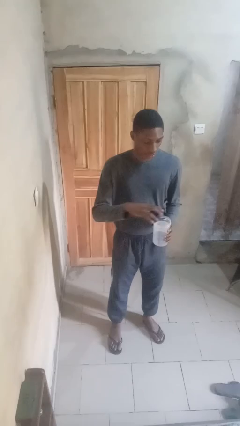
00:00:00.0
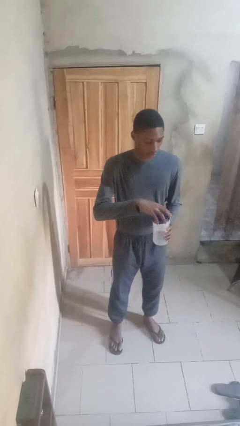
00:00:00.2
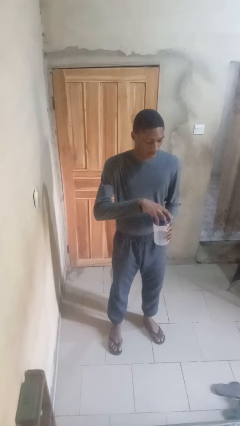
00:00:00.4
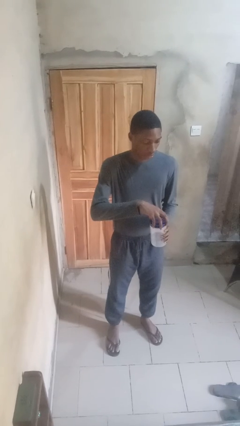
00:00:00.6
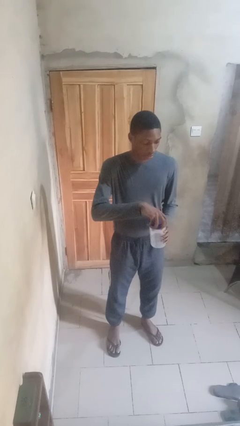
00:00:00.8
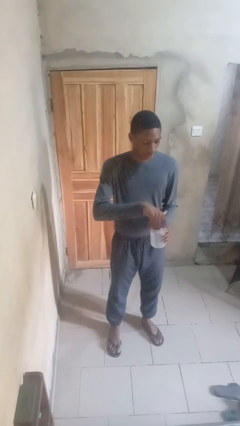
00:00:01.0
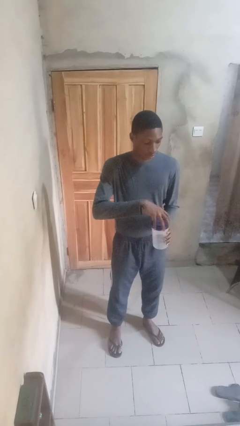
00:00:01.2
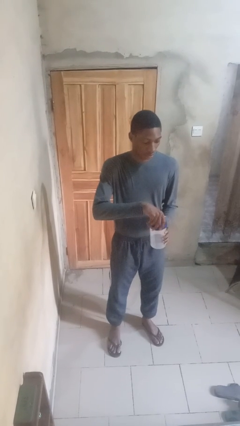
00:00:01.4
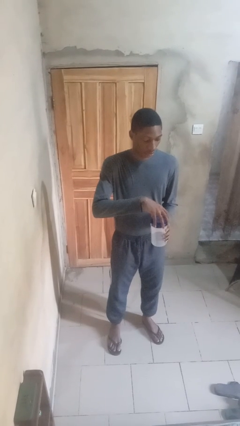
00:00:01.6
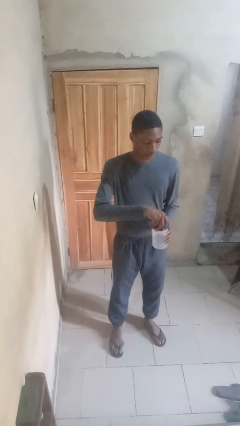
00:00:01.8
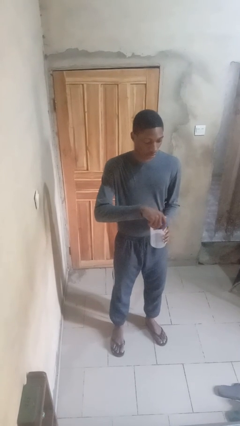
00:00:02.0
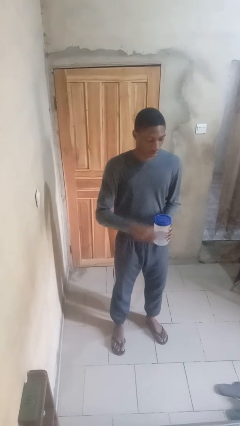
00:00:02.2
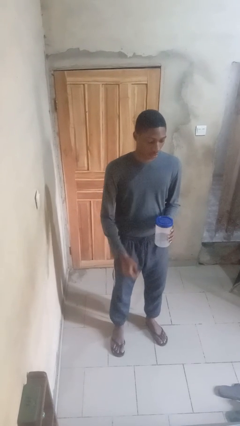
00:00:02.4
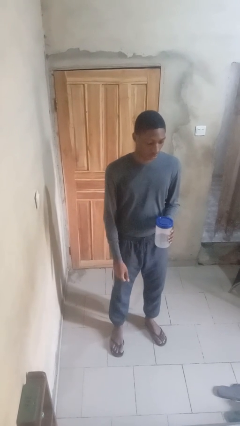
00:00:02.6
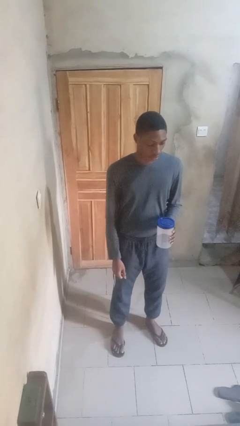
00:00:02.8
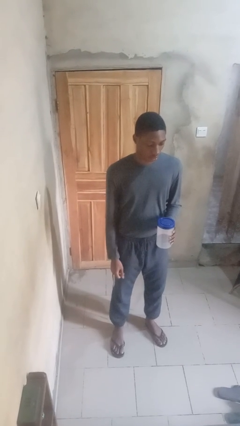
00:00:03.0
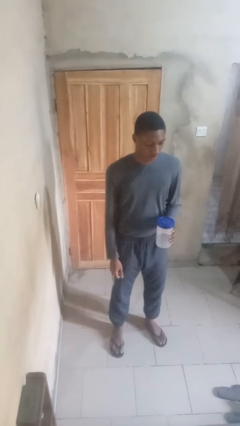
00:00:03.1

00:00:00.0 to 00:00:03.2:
person closes jar

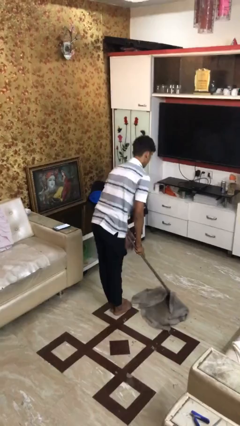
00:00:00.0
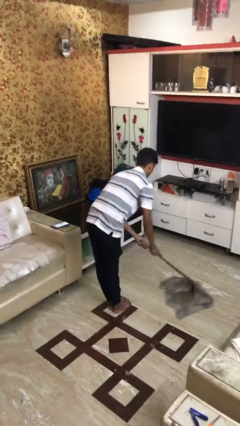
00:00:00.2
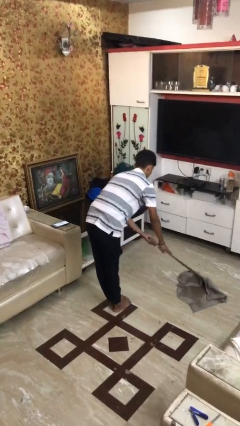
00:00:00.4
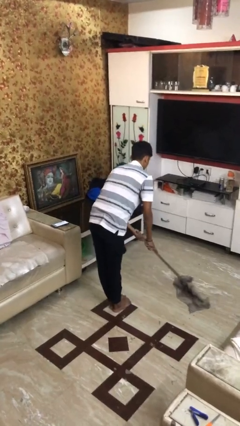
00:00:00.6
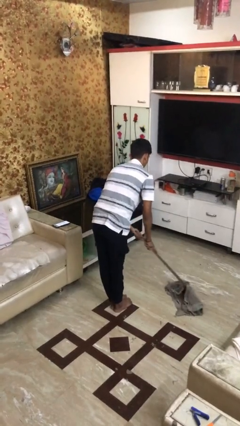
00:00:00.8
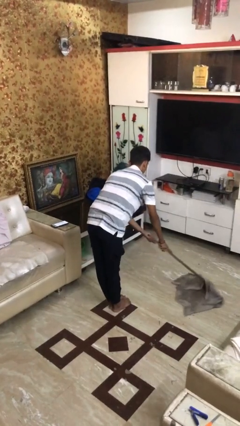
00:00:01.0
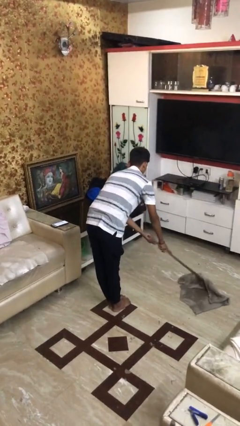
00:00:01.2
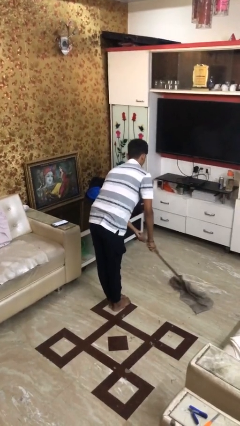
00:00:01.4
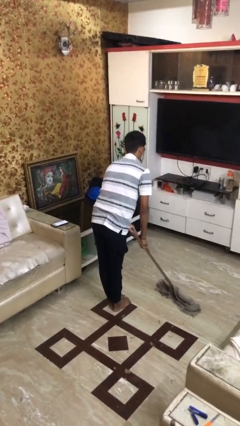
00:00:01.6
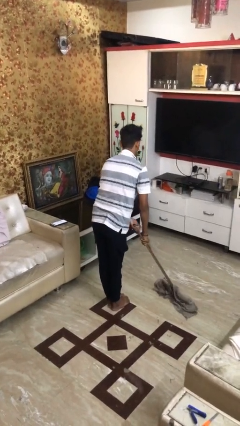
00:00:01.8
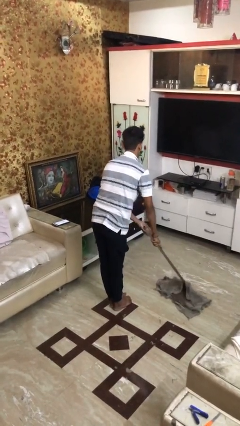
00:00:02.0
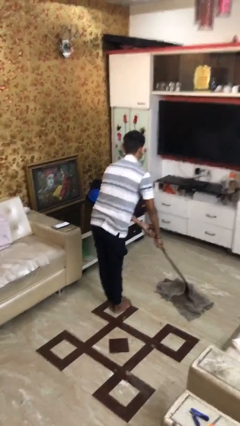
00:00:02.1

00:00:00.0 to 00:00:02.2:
person mops

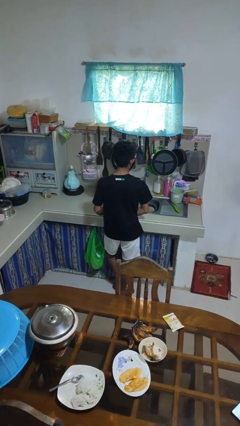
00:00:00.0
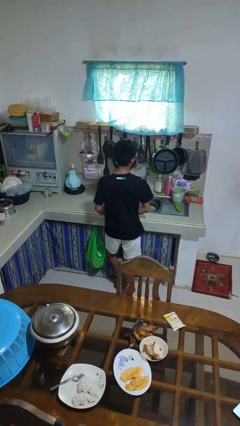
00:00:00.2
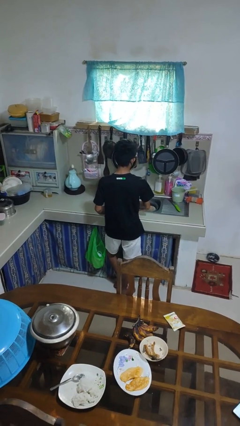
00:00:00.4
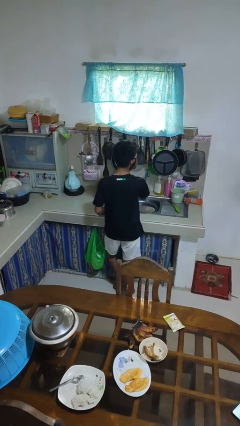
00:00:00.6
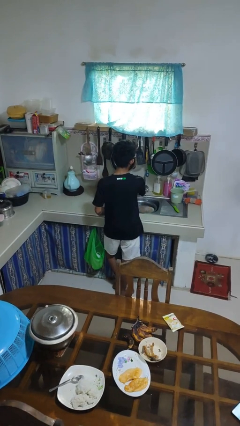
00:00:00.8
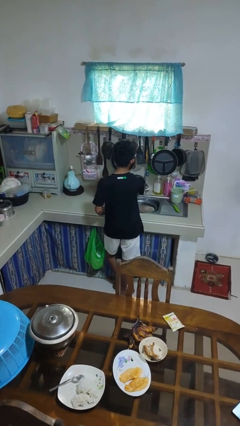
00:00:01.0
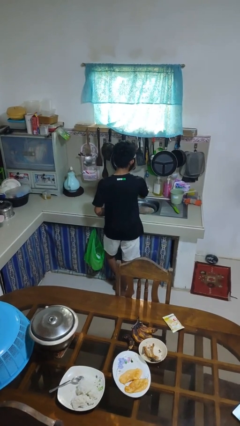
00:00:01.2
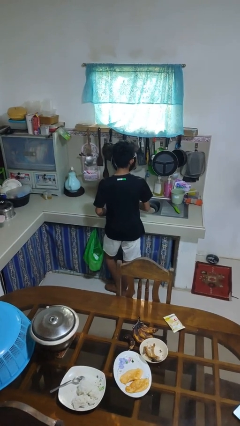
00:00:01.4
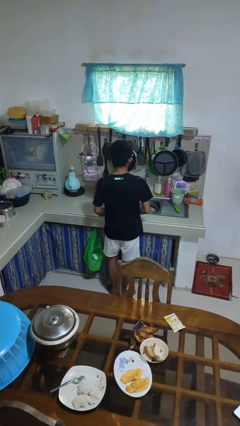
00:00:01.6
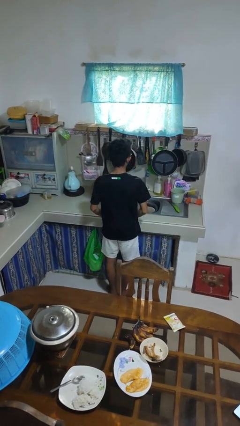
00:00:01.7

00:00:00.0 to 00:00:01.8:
person closes clothes washer

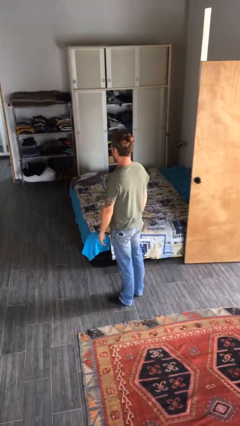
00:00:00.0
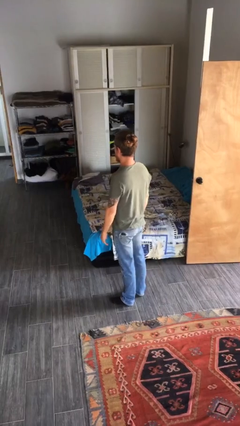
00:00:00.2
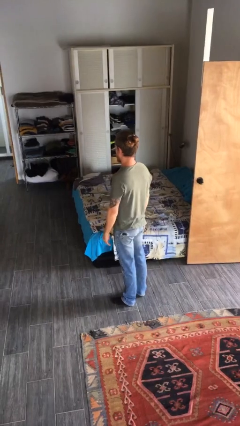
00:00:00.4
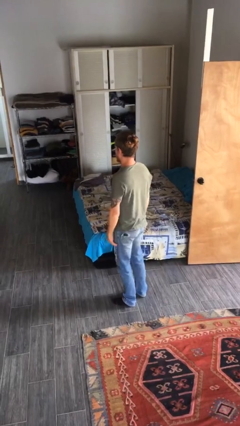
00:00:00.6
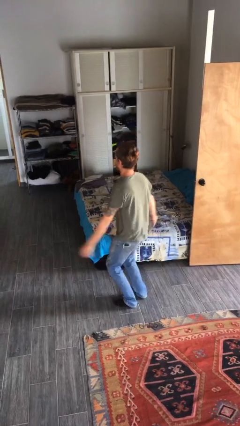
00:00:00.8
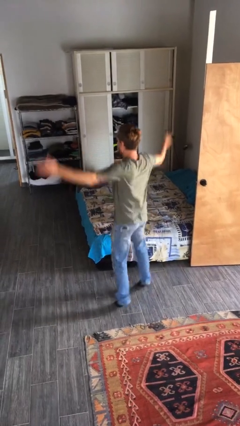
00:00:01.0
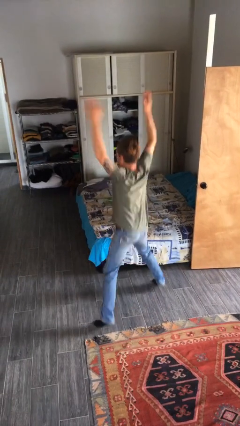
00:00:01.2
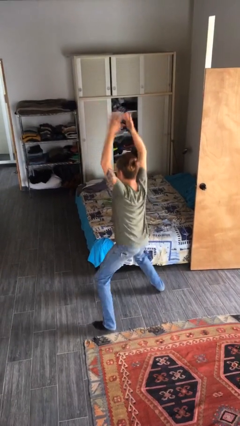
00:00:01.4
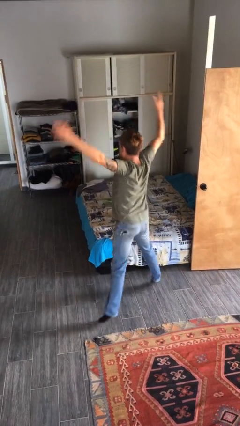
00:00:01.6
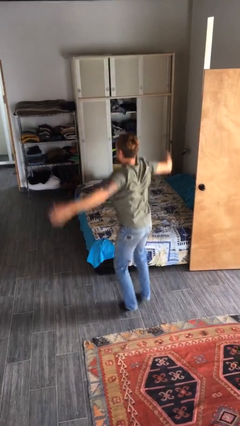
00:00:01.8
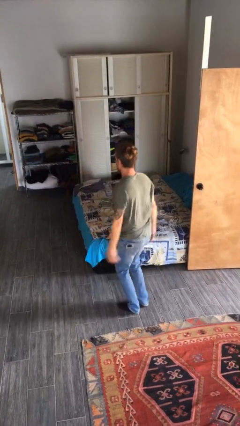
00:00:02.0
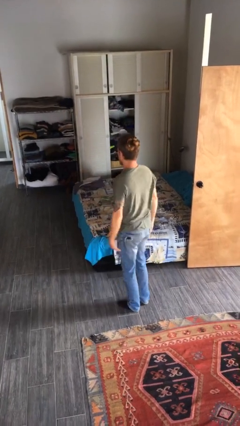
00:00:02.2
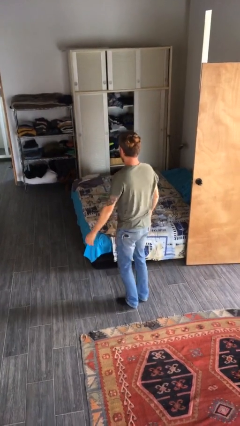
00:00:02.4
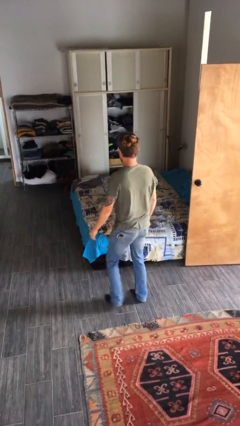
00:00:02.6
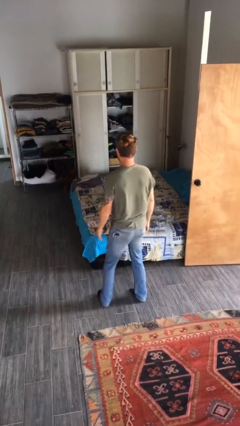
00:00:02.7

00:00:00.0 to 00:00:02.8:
person exercises with jumping jacks

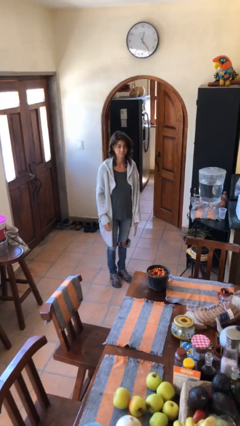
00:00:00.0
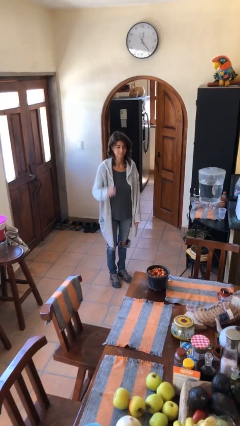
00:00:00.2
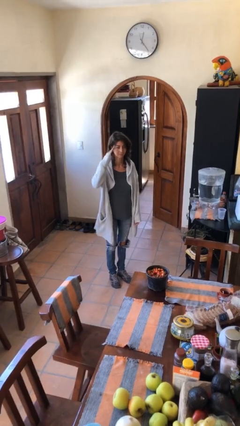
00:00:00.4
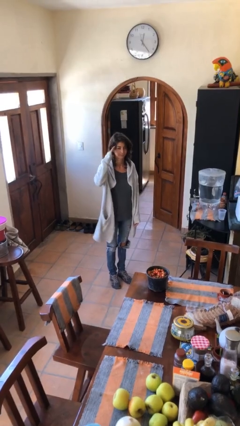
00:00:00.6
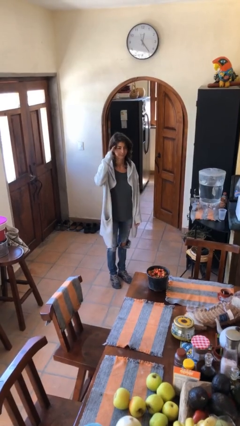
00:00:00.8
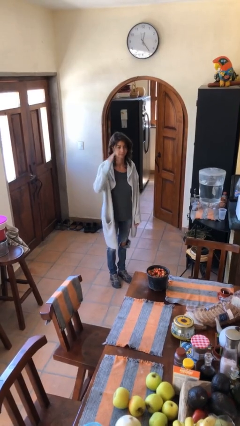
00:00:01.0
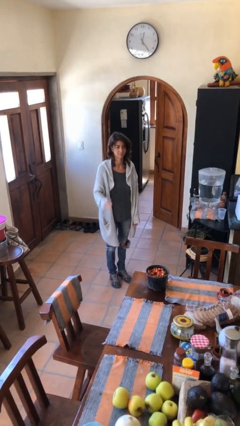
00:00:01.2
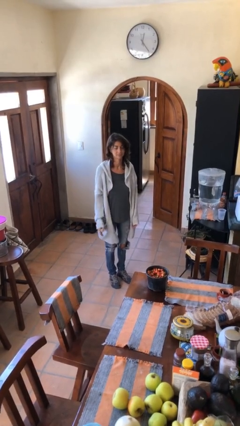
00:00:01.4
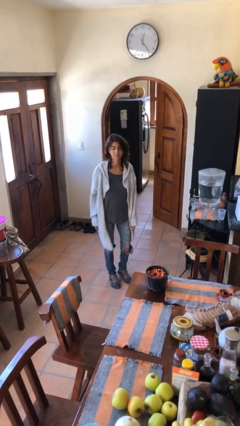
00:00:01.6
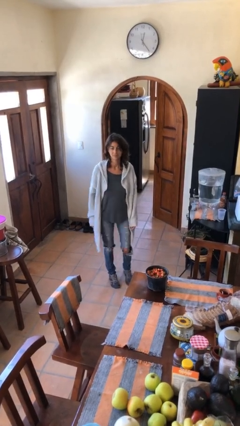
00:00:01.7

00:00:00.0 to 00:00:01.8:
person salutes

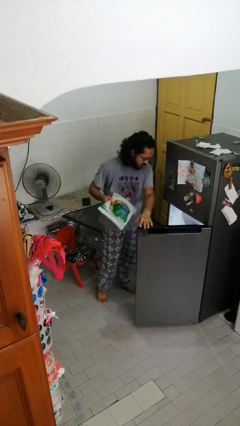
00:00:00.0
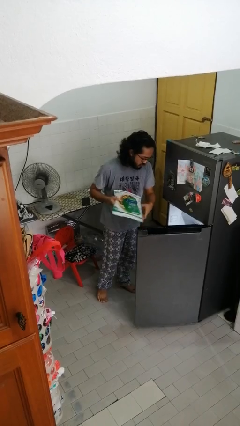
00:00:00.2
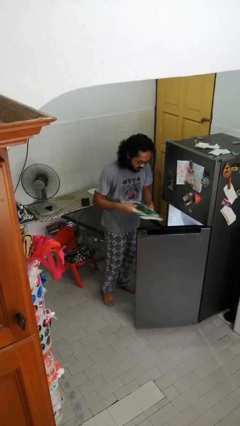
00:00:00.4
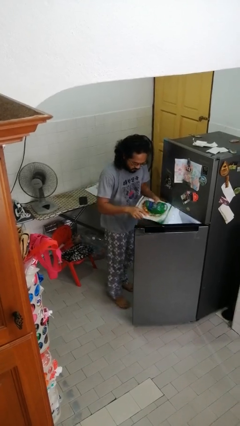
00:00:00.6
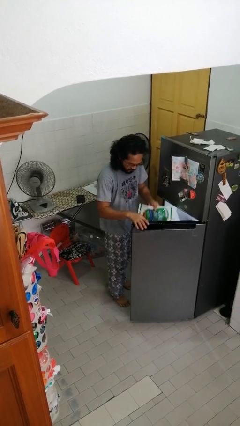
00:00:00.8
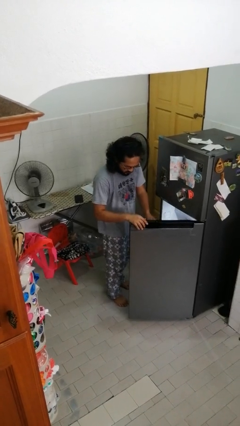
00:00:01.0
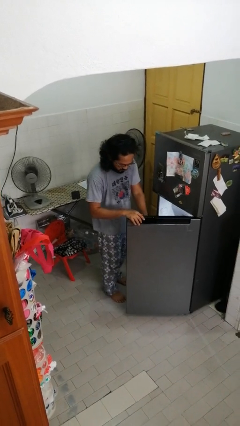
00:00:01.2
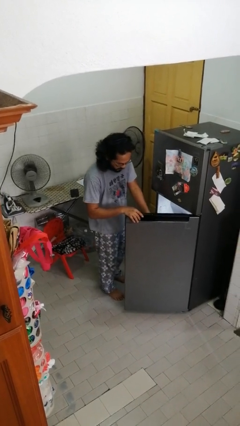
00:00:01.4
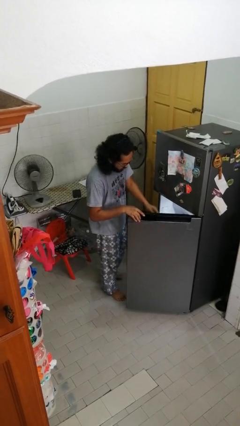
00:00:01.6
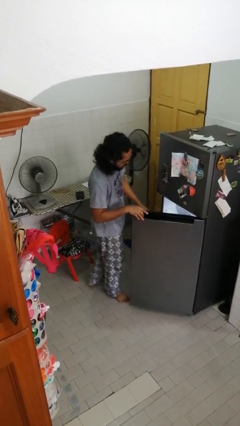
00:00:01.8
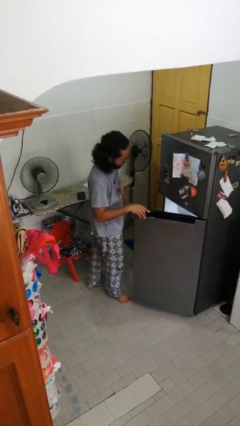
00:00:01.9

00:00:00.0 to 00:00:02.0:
person puts object into refrigerator

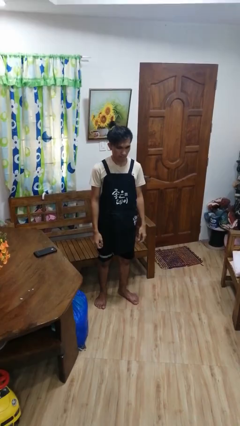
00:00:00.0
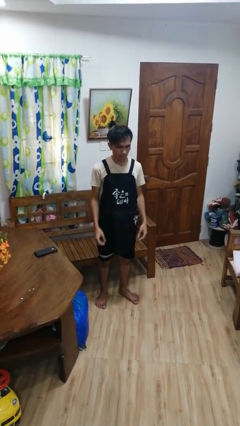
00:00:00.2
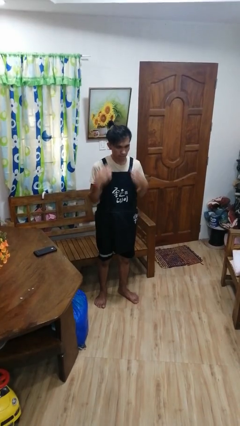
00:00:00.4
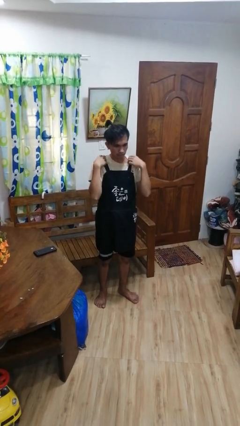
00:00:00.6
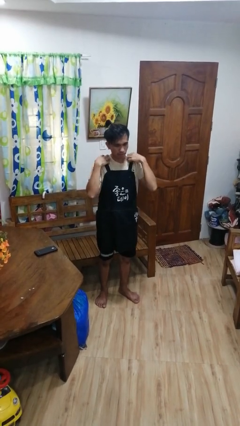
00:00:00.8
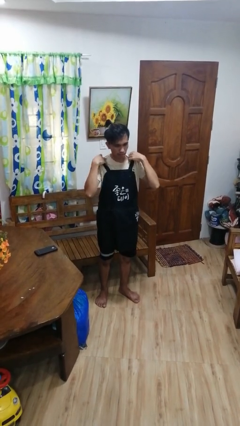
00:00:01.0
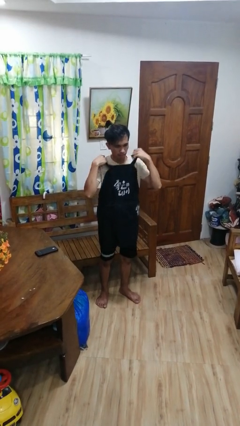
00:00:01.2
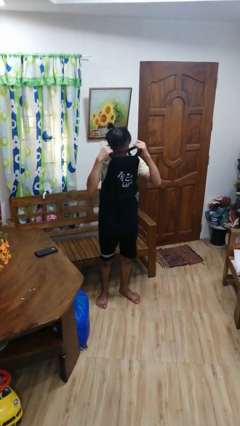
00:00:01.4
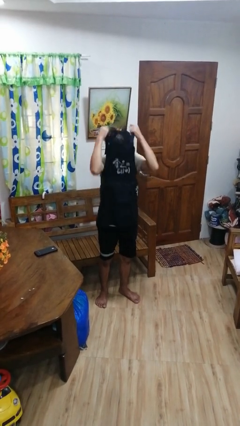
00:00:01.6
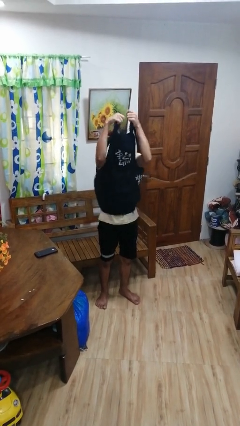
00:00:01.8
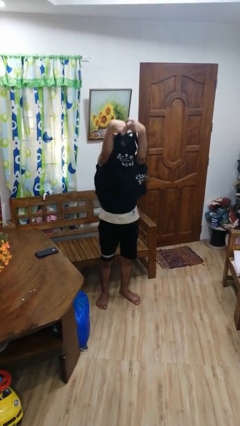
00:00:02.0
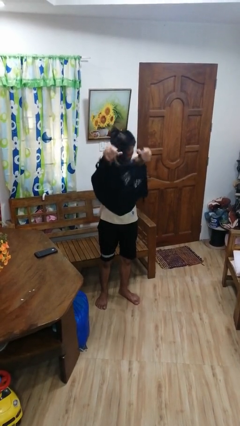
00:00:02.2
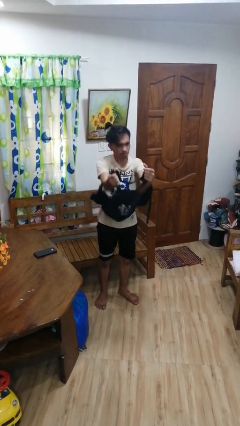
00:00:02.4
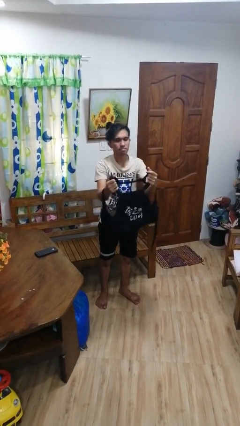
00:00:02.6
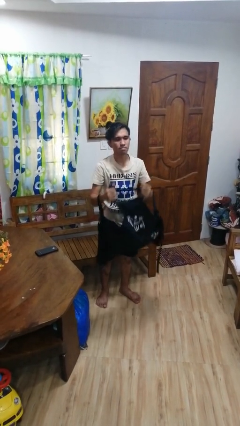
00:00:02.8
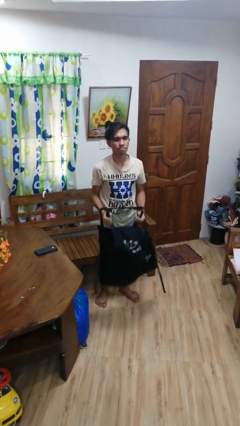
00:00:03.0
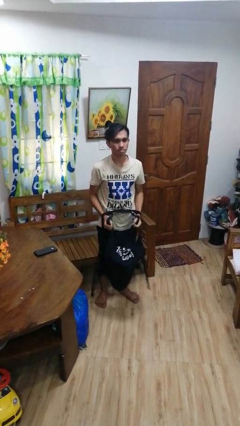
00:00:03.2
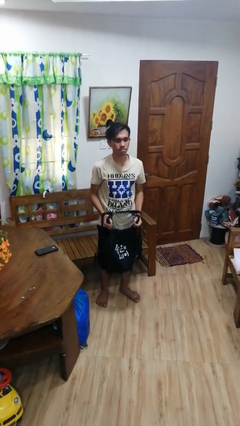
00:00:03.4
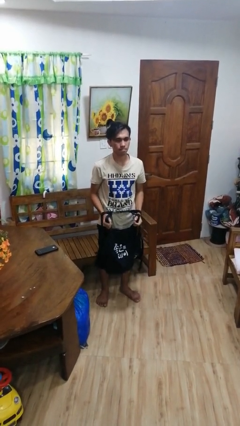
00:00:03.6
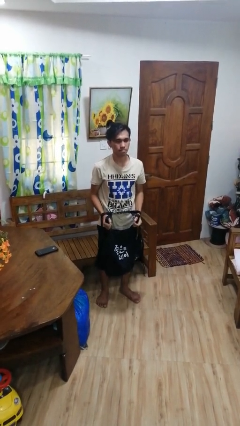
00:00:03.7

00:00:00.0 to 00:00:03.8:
person takes off apron
